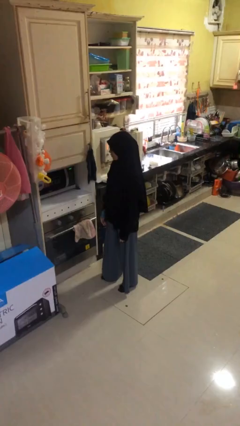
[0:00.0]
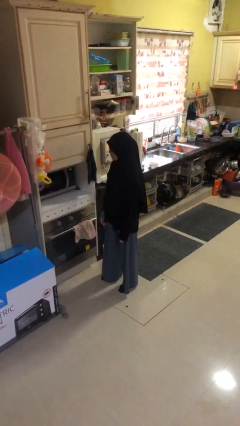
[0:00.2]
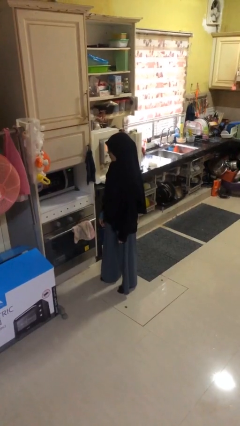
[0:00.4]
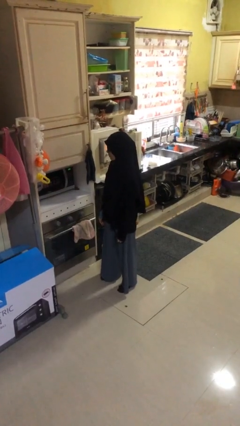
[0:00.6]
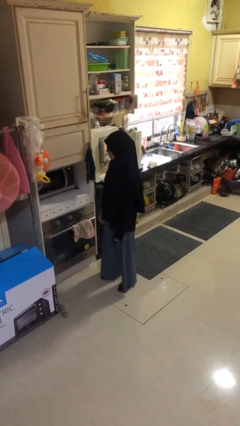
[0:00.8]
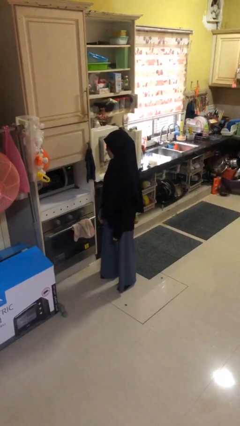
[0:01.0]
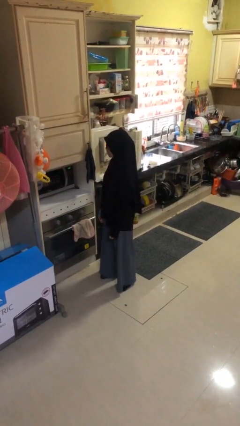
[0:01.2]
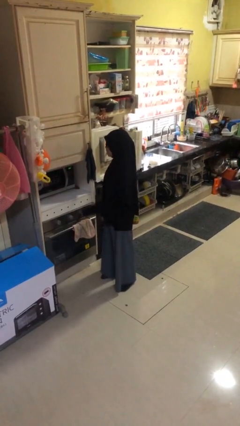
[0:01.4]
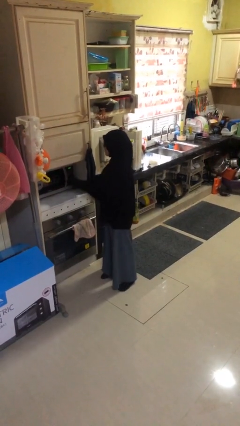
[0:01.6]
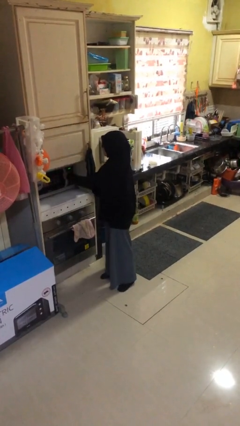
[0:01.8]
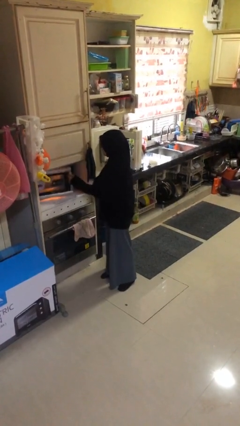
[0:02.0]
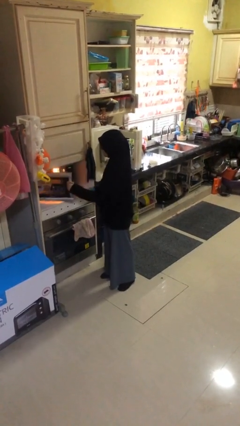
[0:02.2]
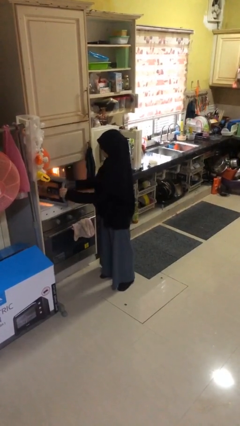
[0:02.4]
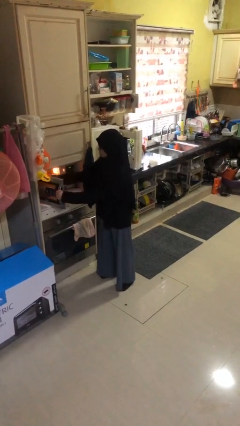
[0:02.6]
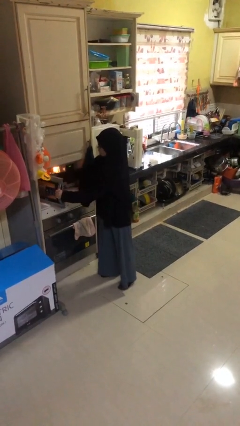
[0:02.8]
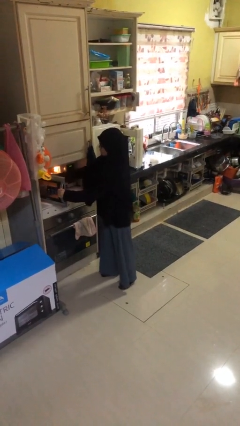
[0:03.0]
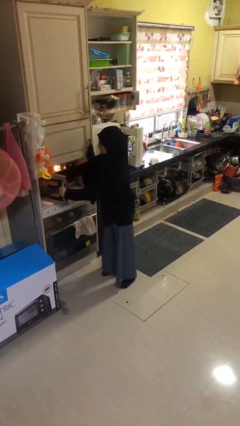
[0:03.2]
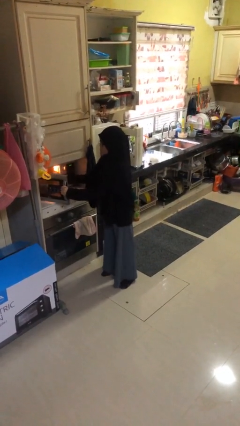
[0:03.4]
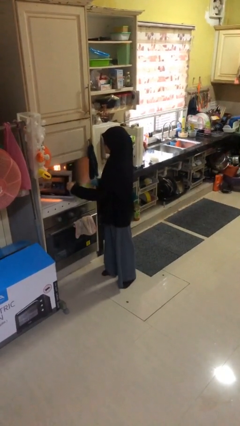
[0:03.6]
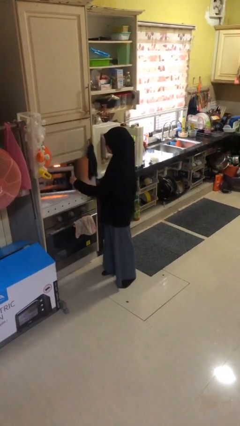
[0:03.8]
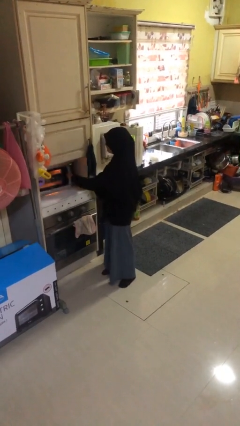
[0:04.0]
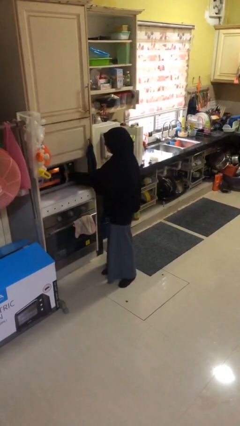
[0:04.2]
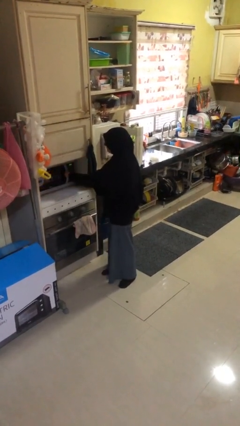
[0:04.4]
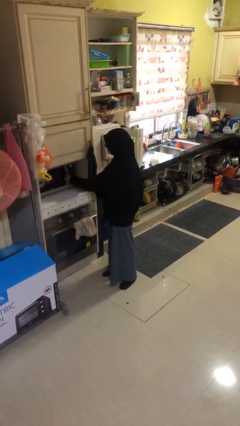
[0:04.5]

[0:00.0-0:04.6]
person takes object from microwave

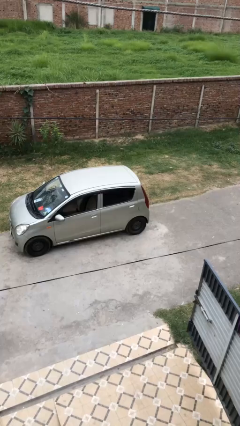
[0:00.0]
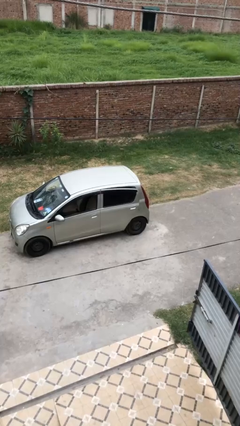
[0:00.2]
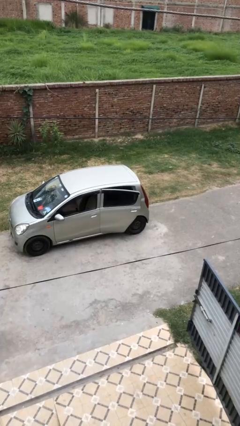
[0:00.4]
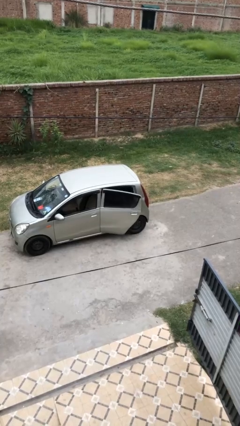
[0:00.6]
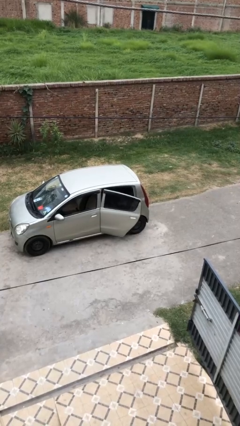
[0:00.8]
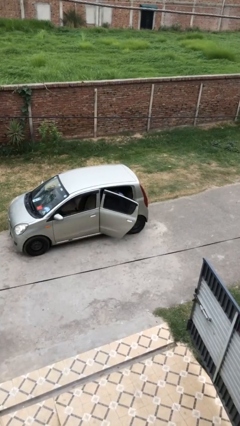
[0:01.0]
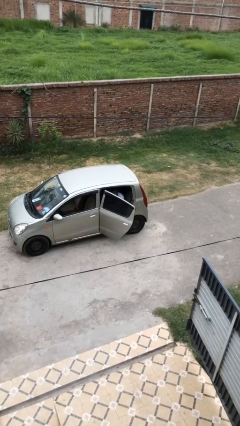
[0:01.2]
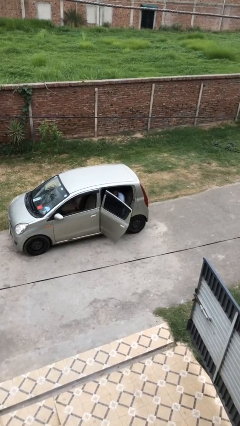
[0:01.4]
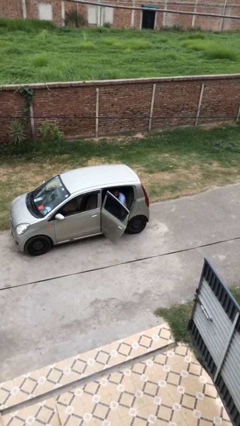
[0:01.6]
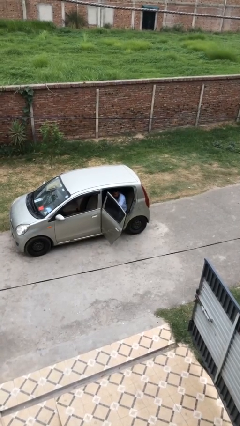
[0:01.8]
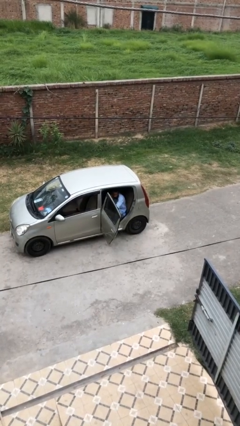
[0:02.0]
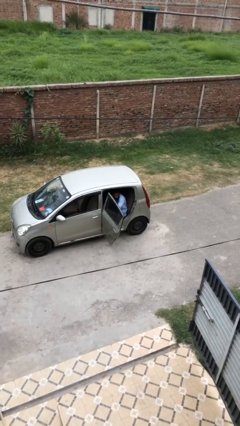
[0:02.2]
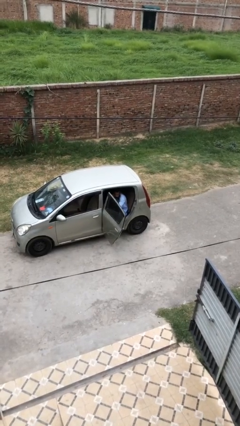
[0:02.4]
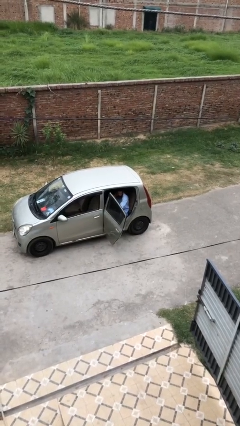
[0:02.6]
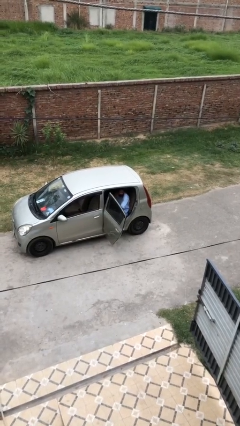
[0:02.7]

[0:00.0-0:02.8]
person opens car door

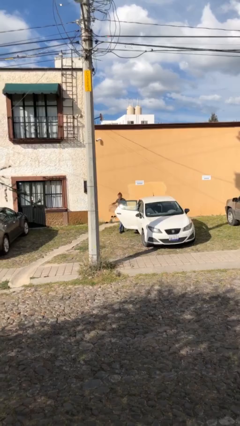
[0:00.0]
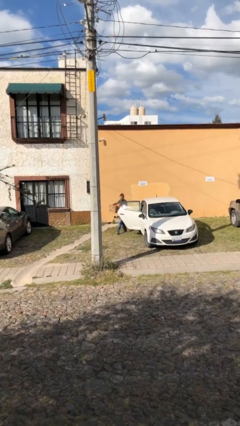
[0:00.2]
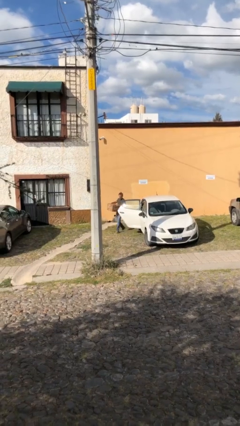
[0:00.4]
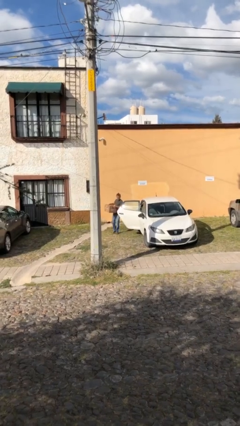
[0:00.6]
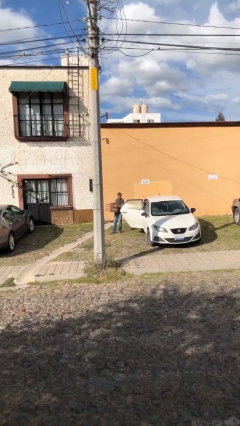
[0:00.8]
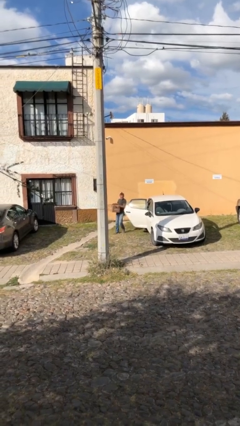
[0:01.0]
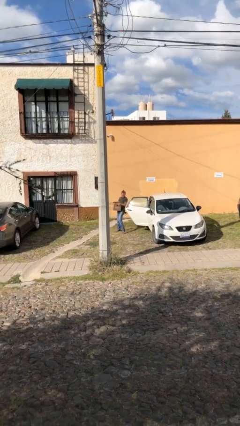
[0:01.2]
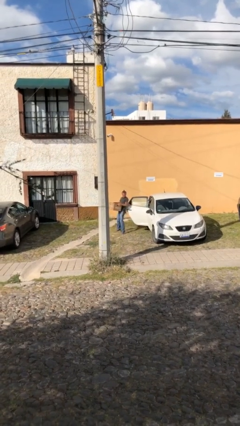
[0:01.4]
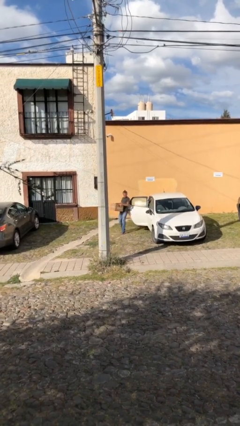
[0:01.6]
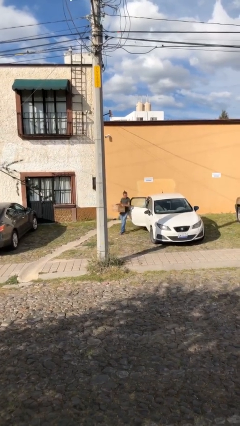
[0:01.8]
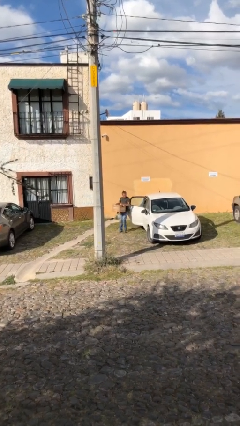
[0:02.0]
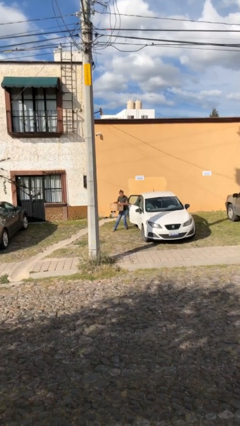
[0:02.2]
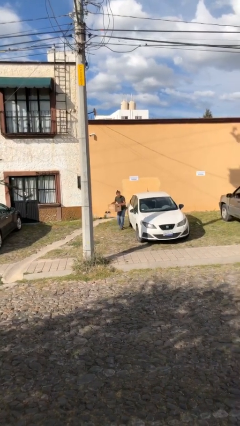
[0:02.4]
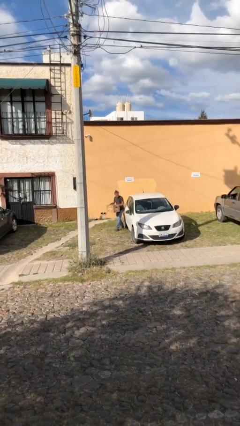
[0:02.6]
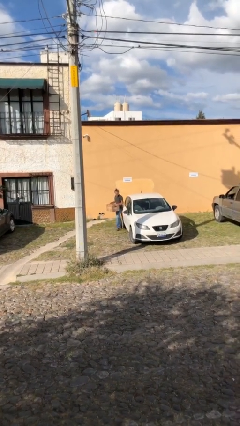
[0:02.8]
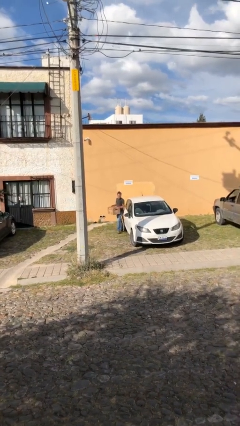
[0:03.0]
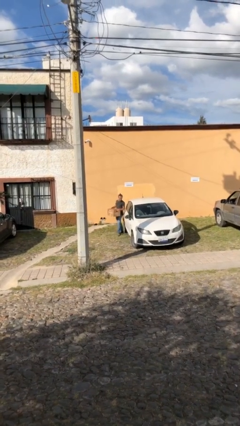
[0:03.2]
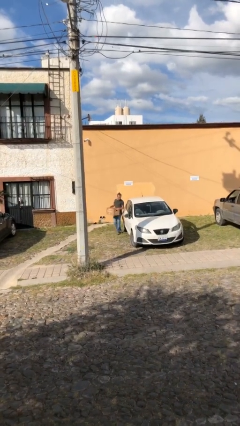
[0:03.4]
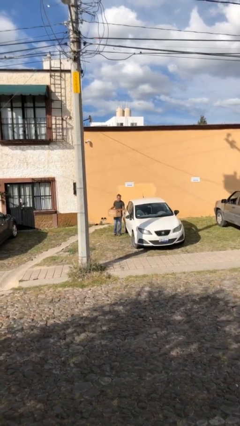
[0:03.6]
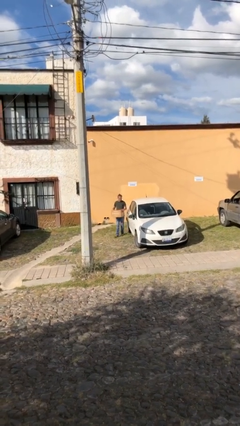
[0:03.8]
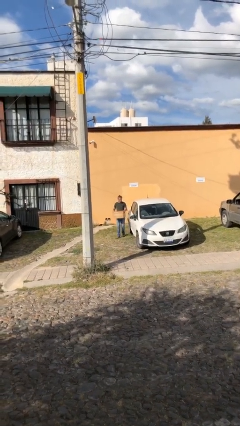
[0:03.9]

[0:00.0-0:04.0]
person closes car door

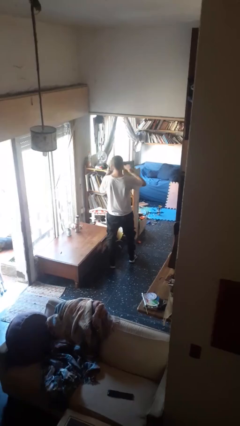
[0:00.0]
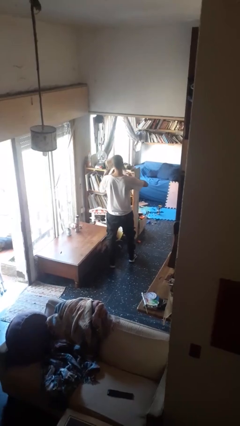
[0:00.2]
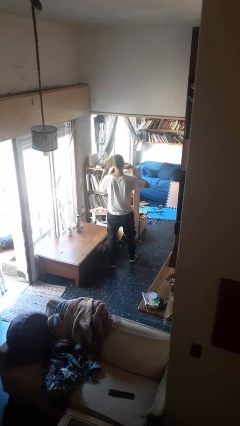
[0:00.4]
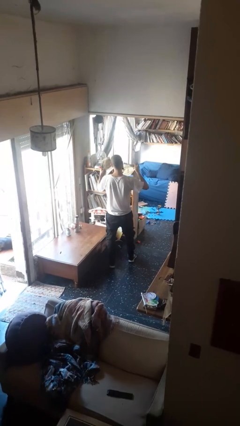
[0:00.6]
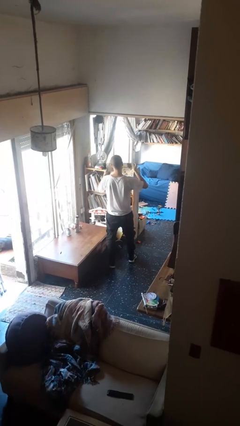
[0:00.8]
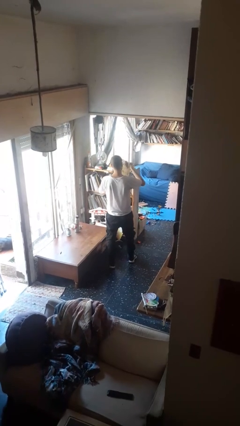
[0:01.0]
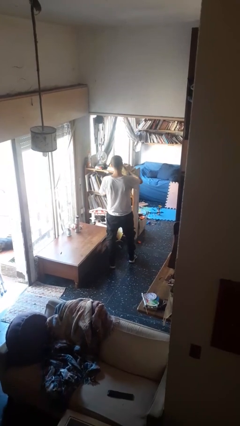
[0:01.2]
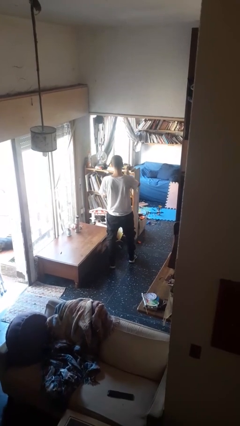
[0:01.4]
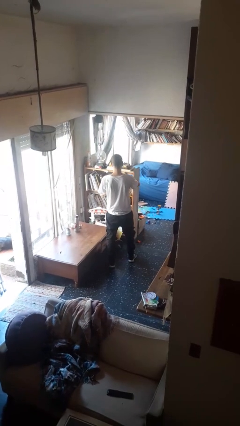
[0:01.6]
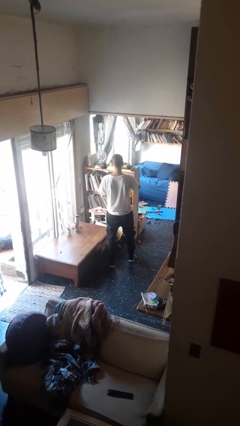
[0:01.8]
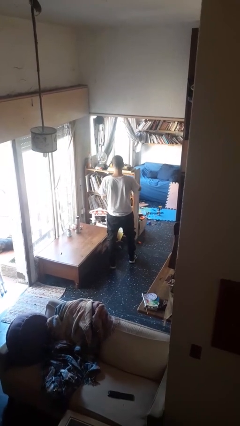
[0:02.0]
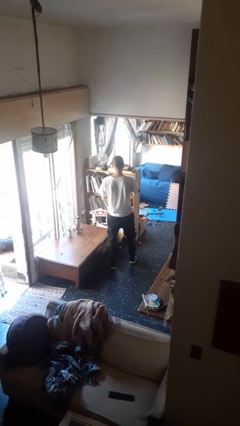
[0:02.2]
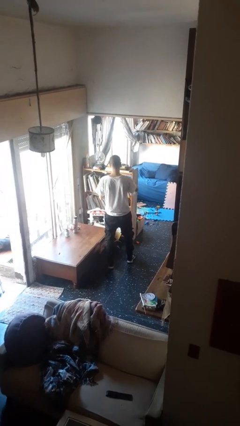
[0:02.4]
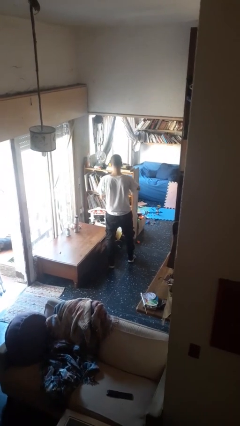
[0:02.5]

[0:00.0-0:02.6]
person tears paper

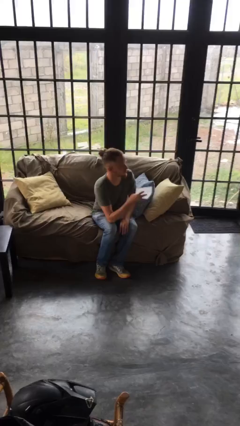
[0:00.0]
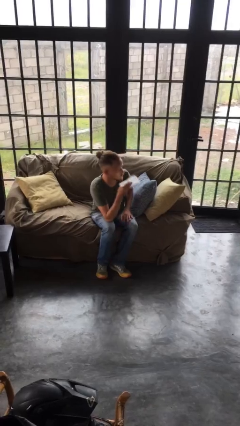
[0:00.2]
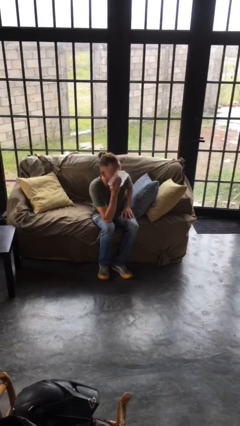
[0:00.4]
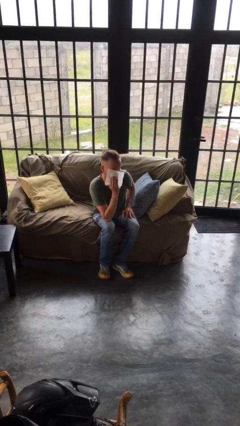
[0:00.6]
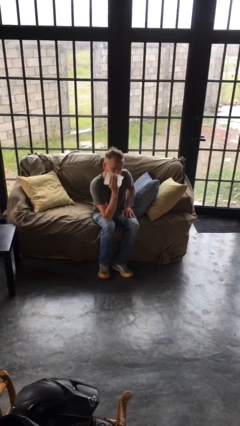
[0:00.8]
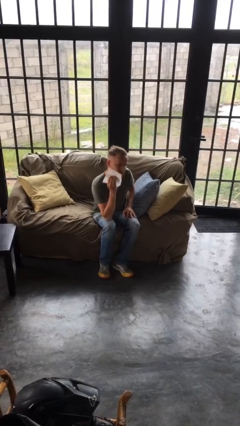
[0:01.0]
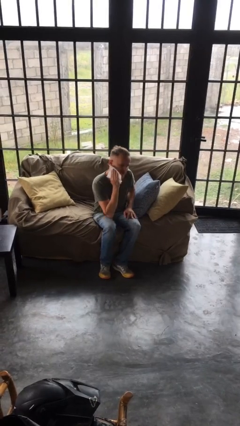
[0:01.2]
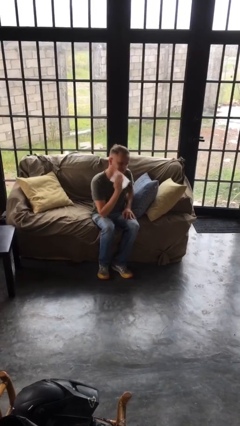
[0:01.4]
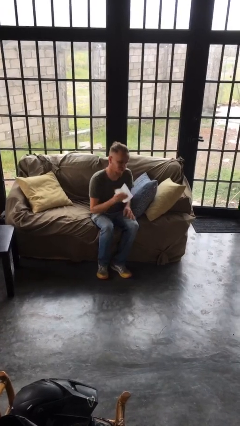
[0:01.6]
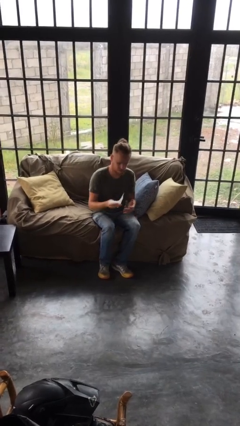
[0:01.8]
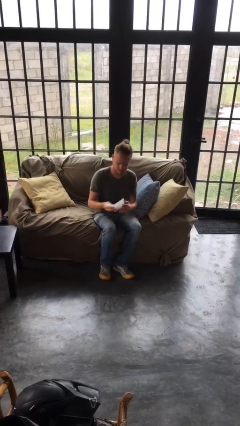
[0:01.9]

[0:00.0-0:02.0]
person wipes mouth with napkin

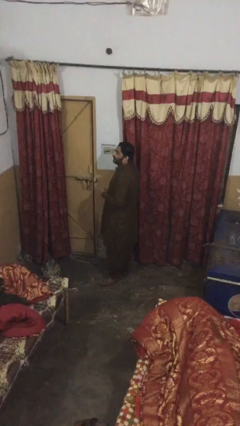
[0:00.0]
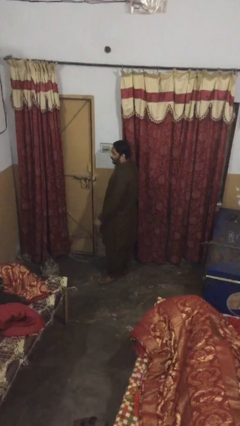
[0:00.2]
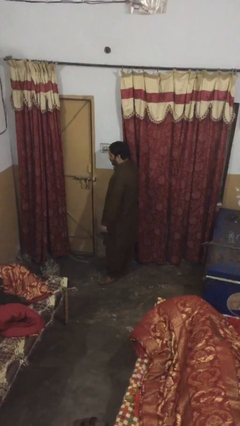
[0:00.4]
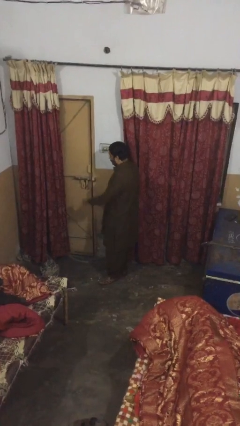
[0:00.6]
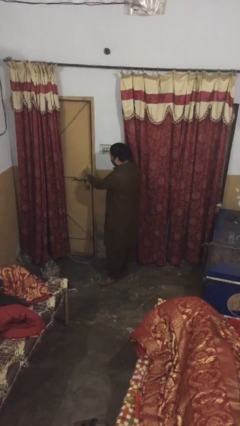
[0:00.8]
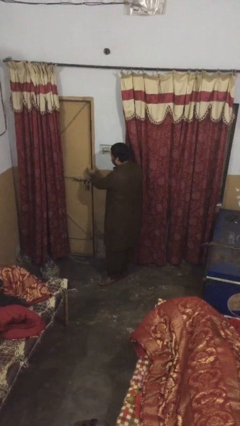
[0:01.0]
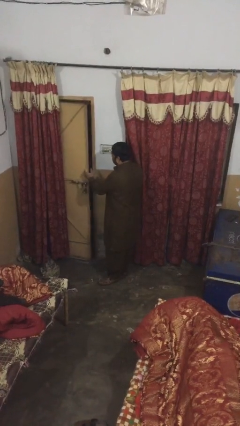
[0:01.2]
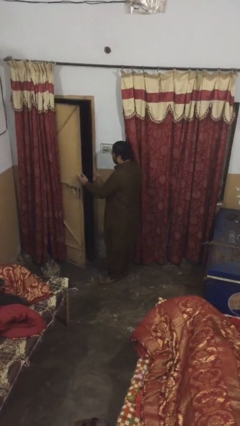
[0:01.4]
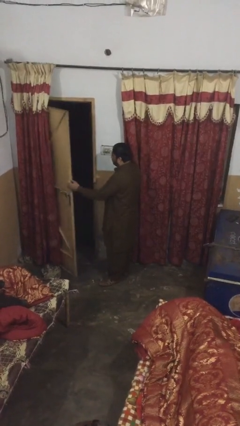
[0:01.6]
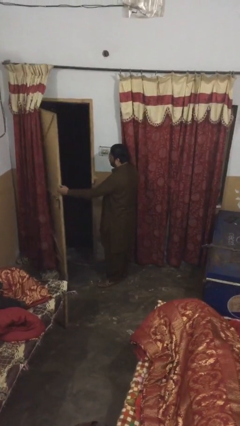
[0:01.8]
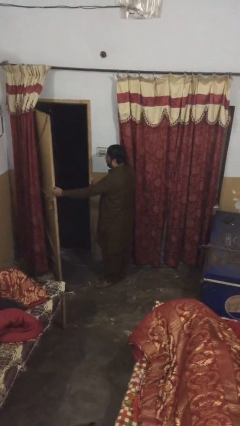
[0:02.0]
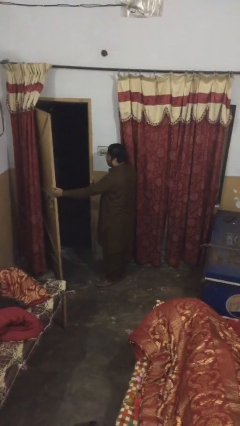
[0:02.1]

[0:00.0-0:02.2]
person opens facility door
